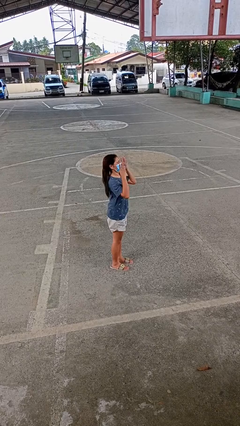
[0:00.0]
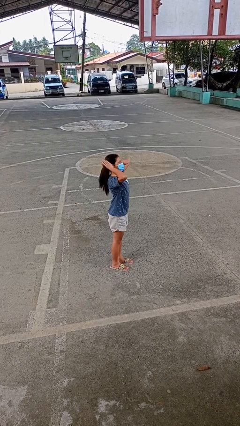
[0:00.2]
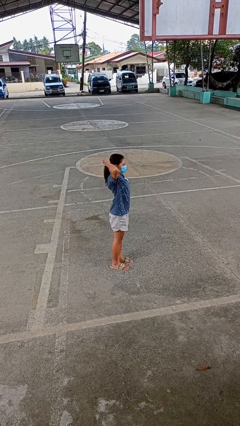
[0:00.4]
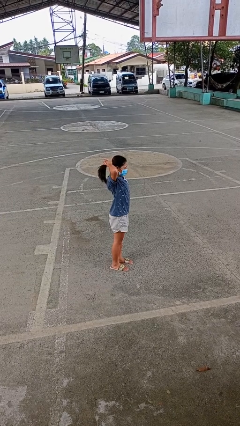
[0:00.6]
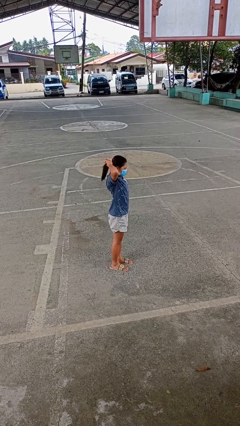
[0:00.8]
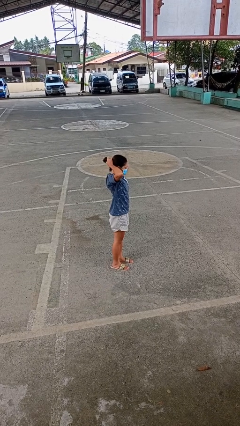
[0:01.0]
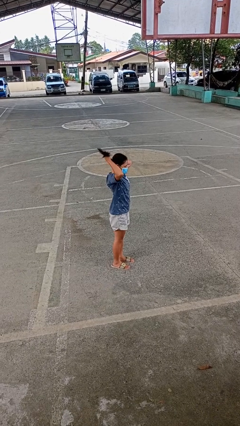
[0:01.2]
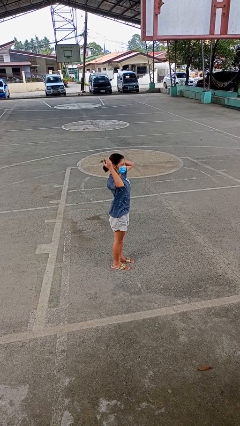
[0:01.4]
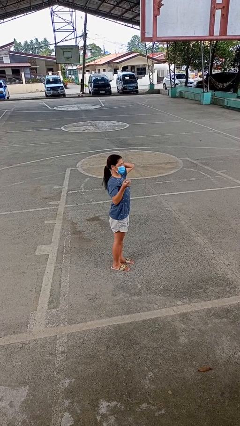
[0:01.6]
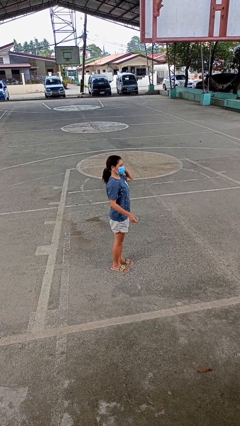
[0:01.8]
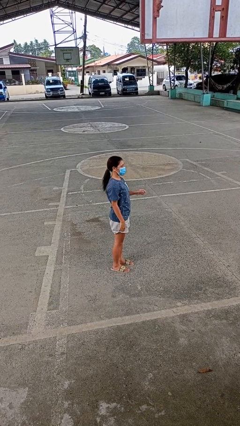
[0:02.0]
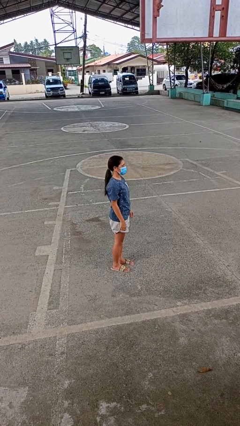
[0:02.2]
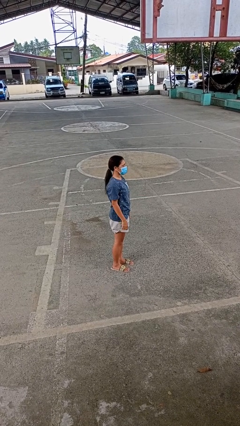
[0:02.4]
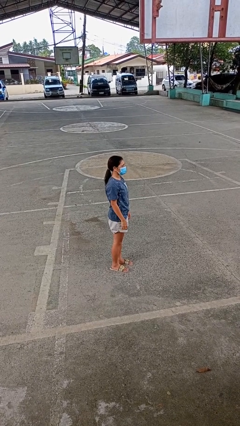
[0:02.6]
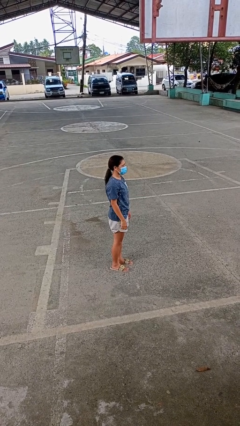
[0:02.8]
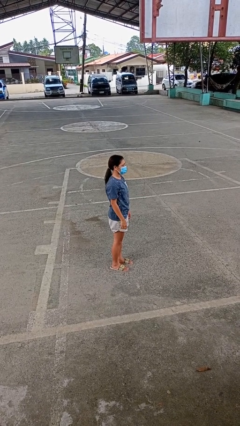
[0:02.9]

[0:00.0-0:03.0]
person puts hair in ponytail

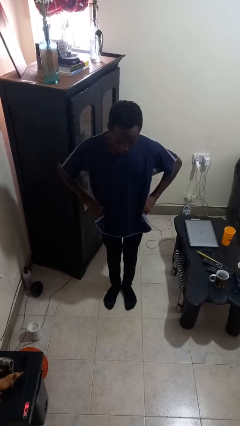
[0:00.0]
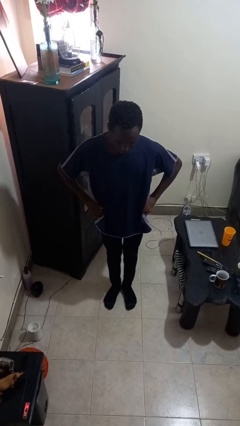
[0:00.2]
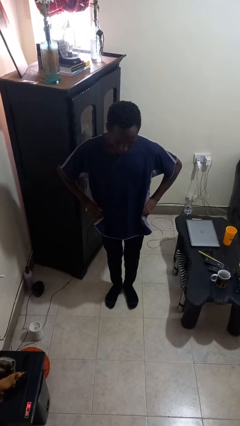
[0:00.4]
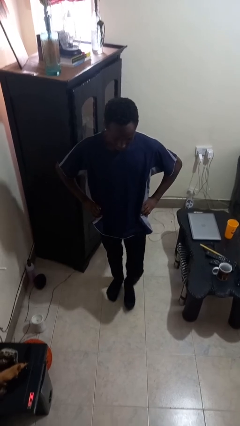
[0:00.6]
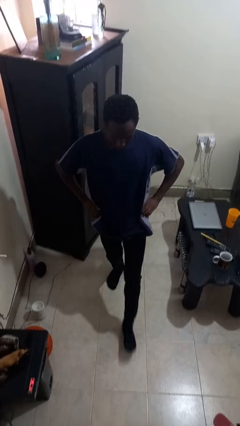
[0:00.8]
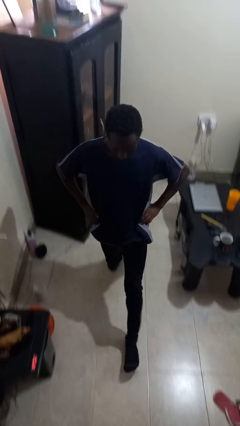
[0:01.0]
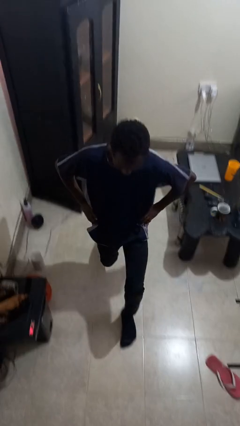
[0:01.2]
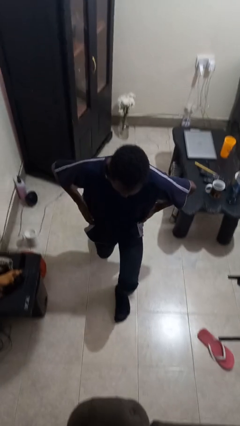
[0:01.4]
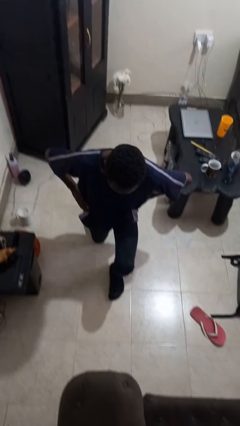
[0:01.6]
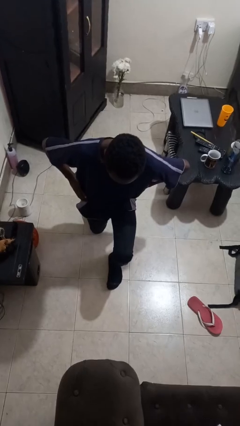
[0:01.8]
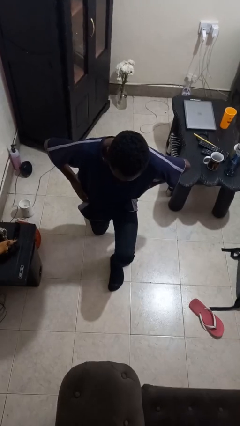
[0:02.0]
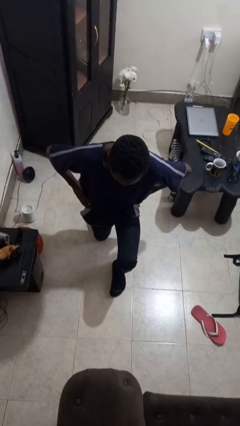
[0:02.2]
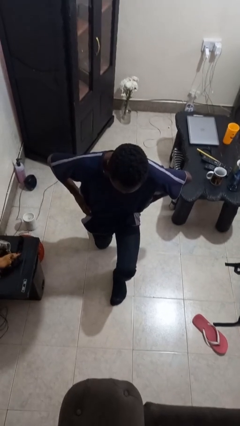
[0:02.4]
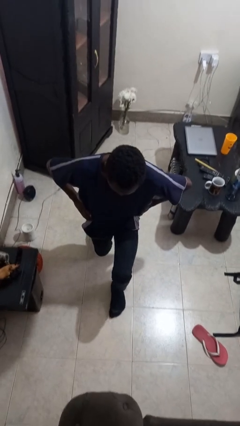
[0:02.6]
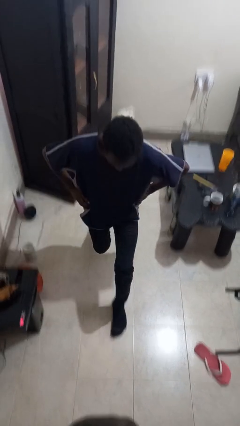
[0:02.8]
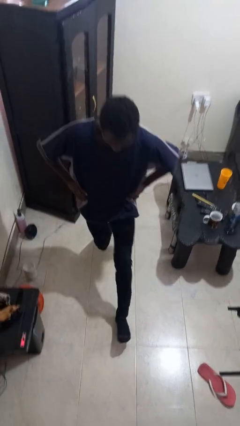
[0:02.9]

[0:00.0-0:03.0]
person exercises with lunges

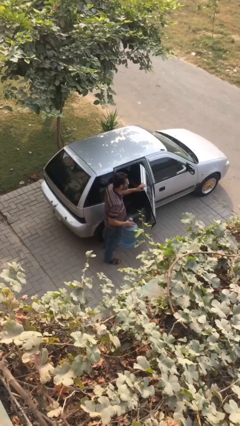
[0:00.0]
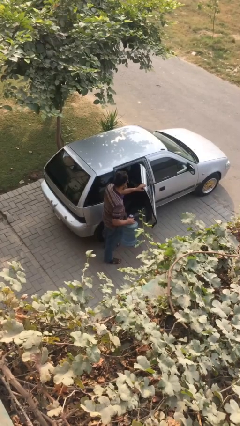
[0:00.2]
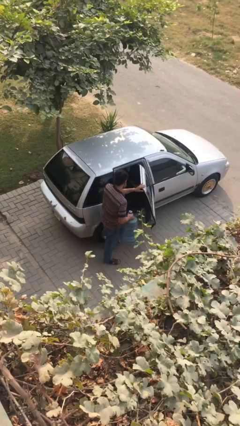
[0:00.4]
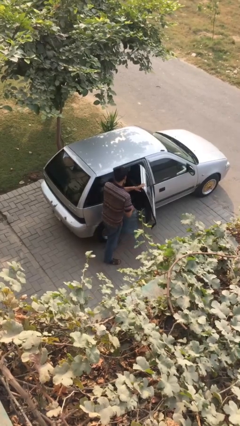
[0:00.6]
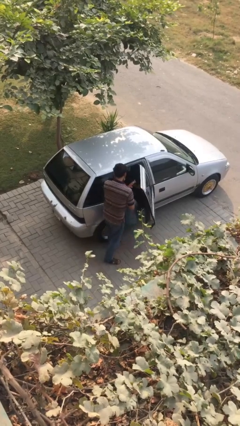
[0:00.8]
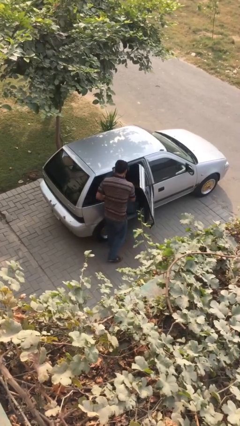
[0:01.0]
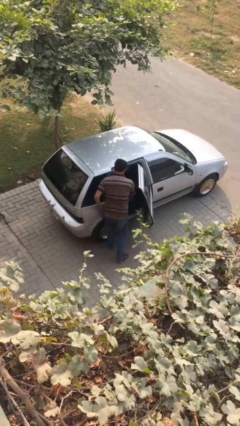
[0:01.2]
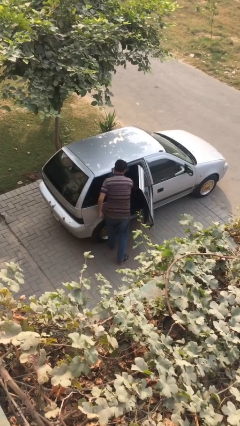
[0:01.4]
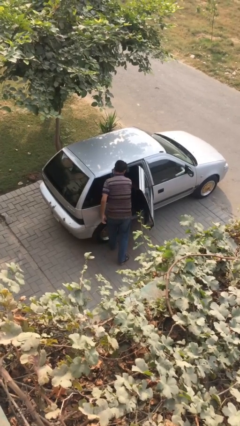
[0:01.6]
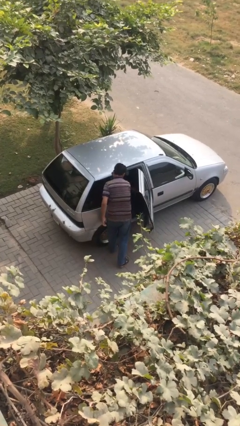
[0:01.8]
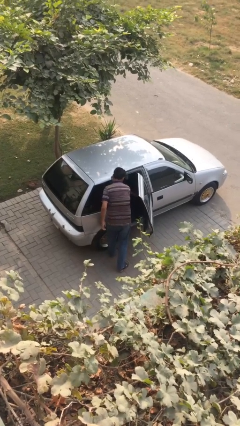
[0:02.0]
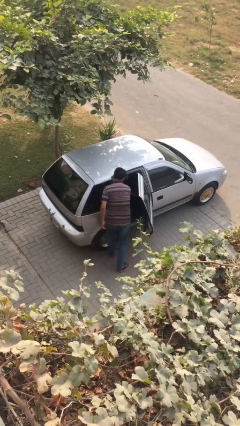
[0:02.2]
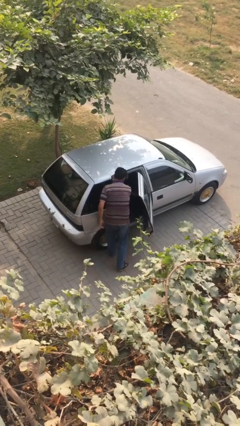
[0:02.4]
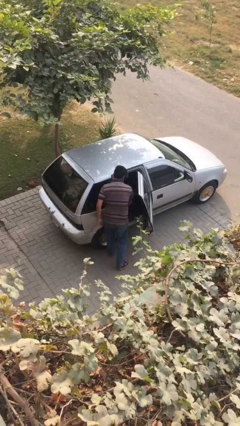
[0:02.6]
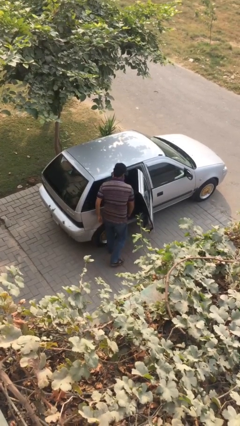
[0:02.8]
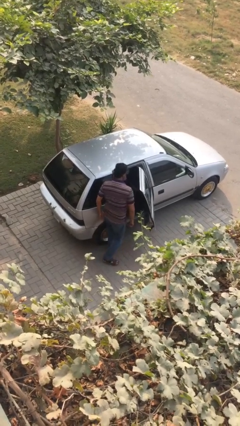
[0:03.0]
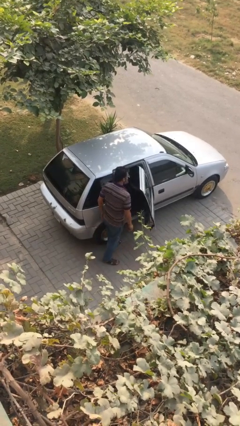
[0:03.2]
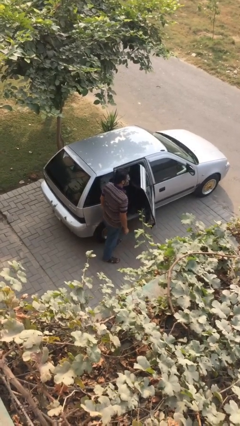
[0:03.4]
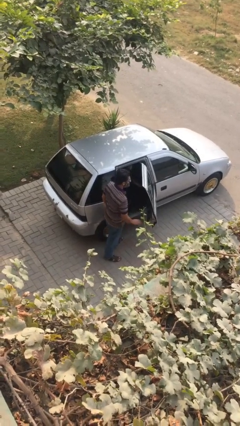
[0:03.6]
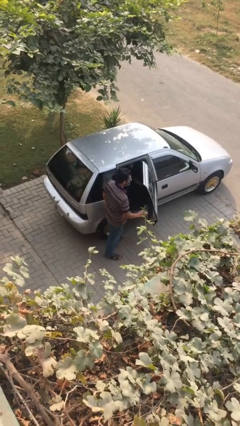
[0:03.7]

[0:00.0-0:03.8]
person loads car

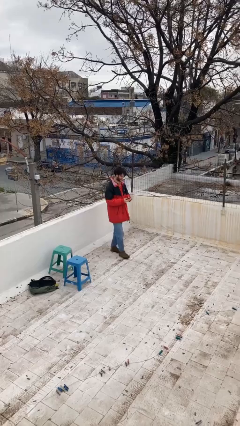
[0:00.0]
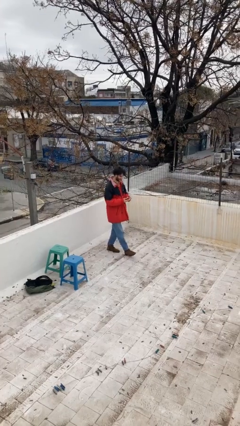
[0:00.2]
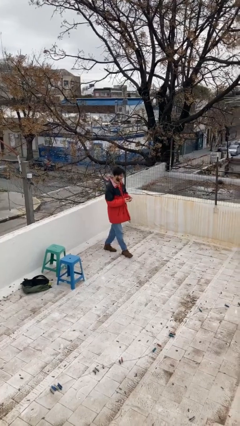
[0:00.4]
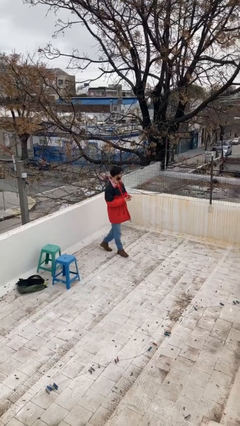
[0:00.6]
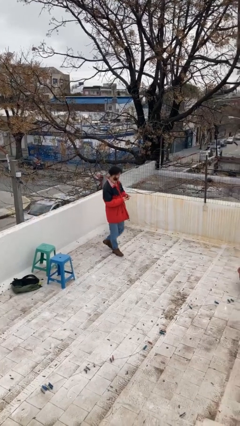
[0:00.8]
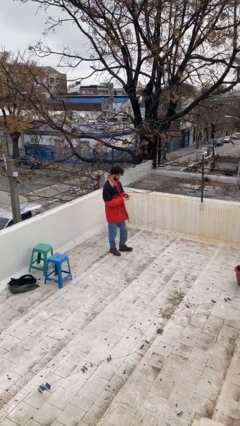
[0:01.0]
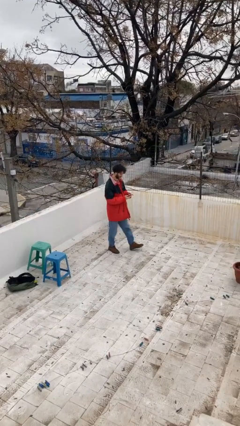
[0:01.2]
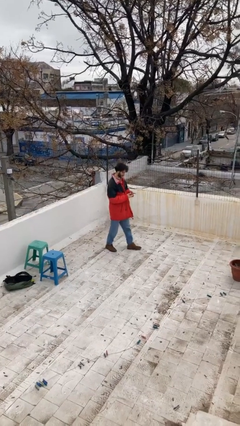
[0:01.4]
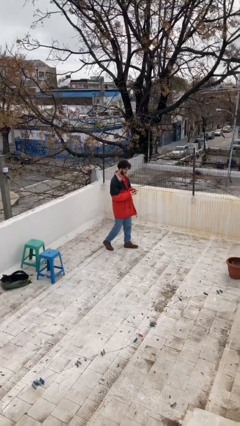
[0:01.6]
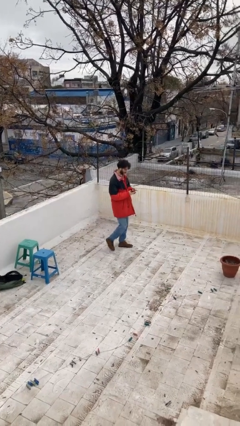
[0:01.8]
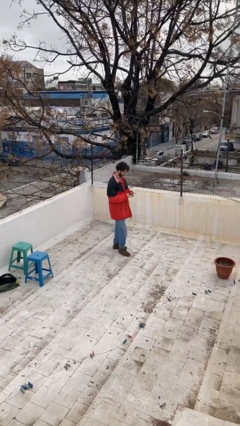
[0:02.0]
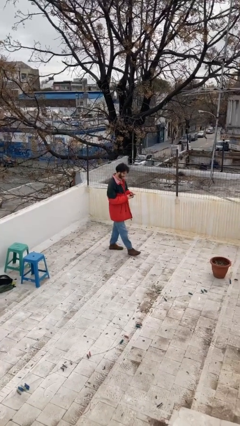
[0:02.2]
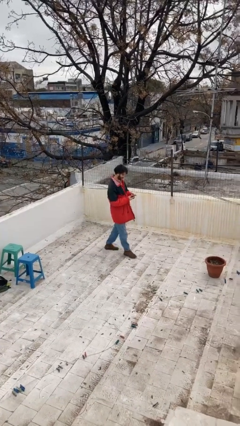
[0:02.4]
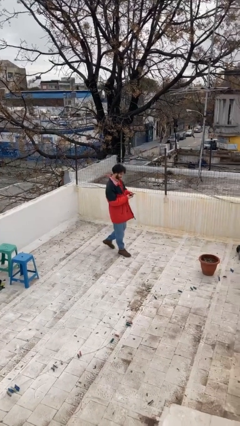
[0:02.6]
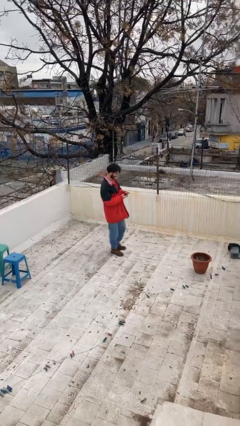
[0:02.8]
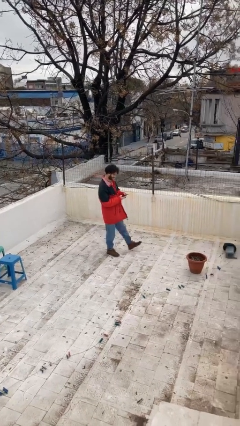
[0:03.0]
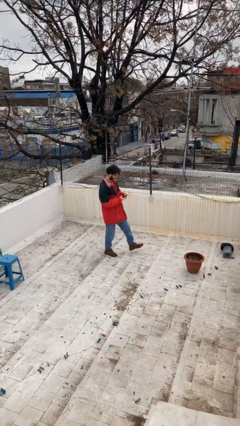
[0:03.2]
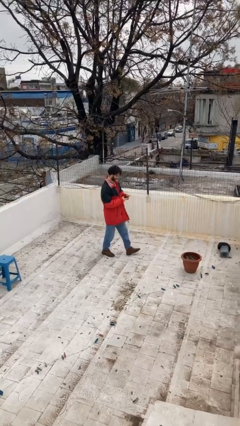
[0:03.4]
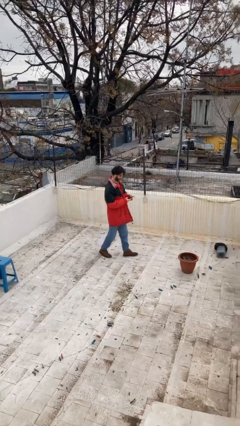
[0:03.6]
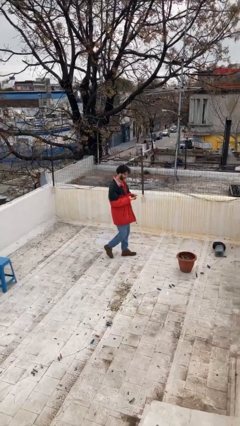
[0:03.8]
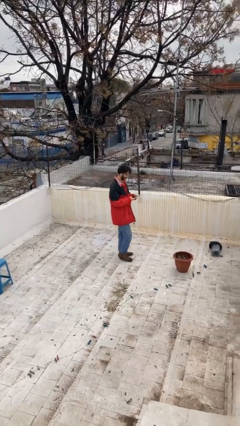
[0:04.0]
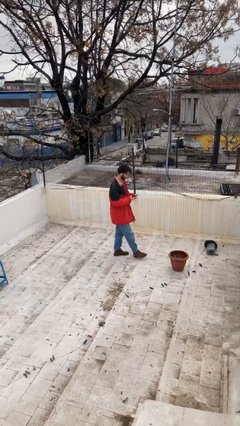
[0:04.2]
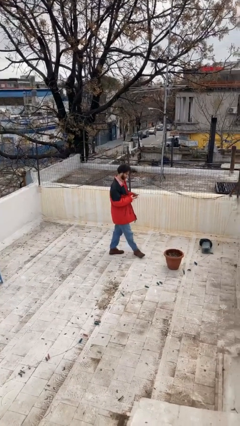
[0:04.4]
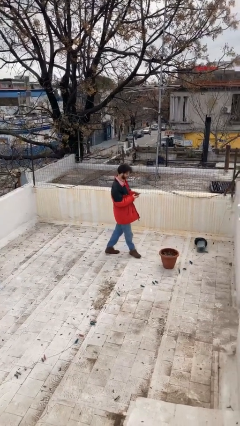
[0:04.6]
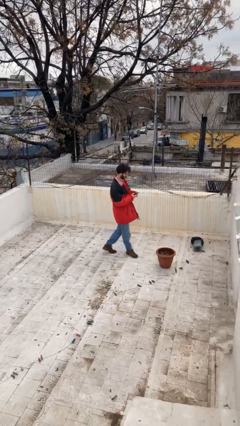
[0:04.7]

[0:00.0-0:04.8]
person texts on phone

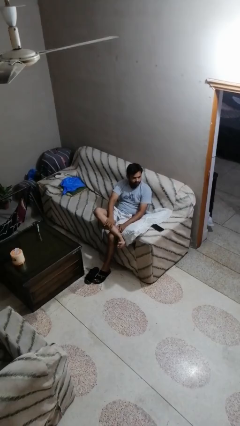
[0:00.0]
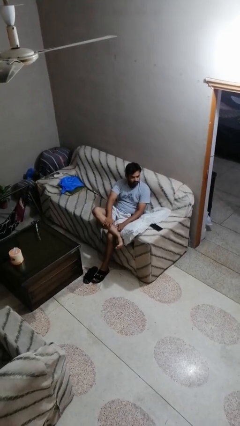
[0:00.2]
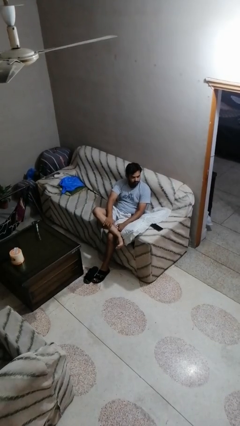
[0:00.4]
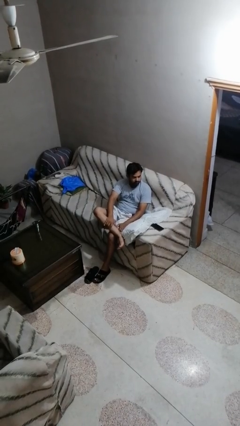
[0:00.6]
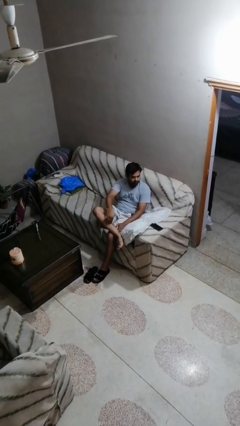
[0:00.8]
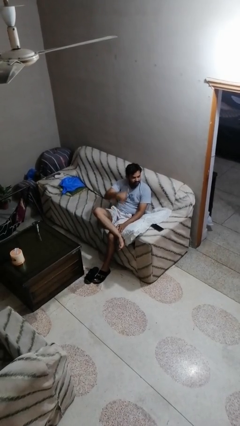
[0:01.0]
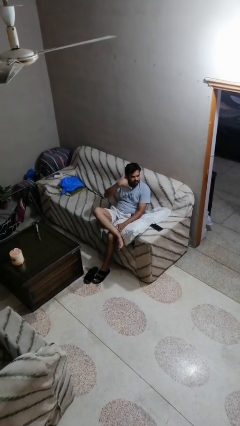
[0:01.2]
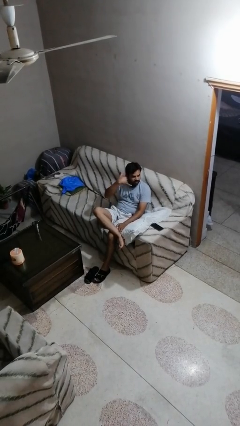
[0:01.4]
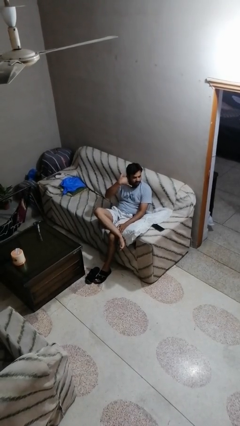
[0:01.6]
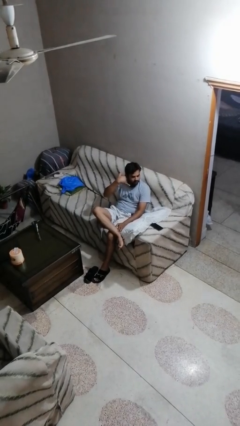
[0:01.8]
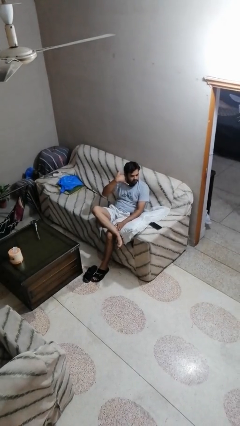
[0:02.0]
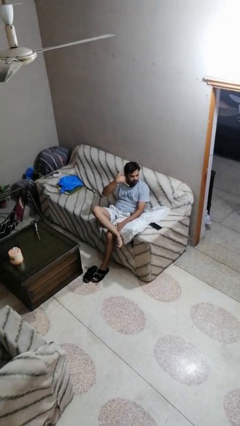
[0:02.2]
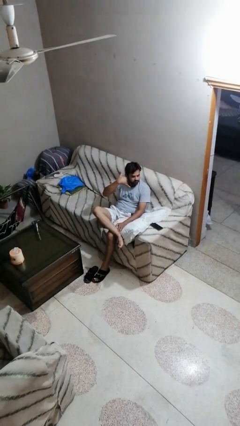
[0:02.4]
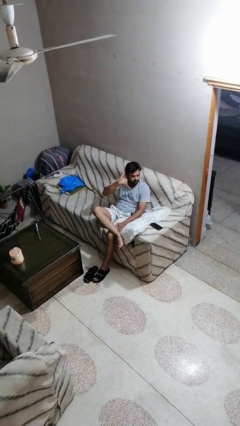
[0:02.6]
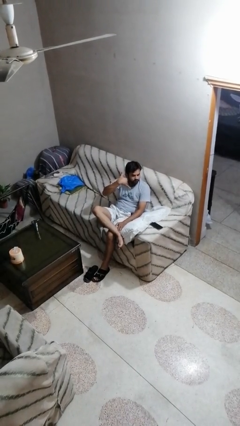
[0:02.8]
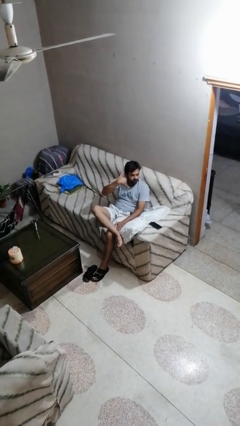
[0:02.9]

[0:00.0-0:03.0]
person gestures call me
